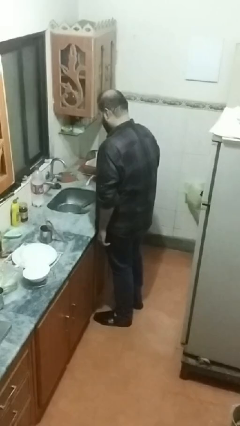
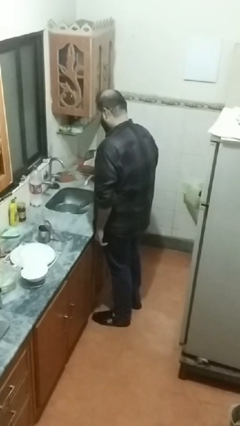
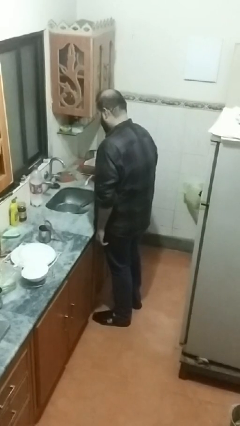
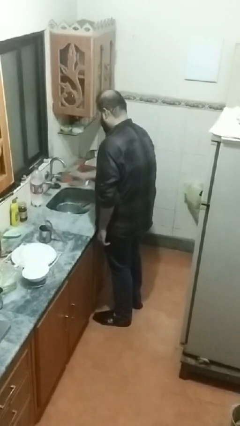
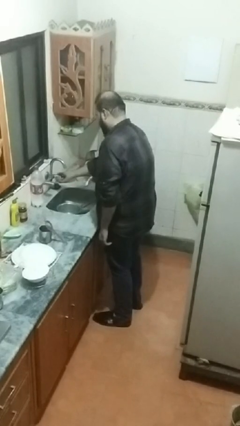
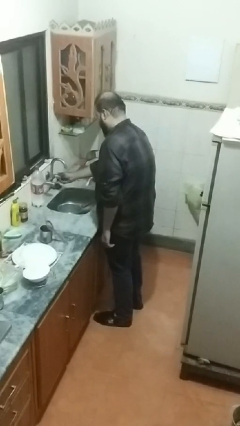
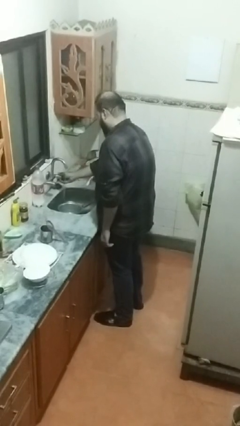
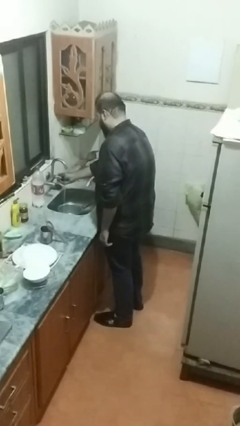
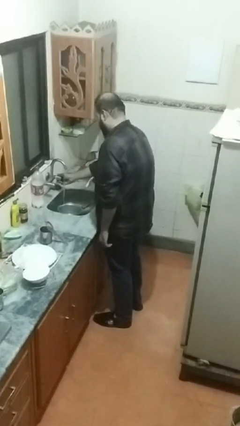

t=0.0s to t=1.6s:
person turns on faucet

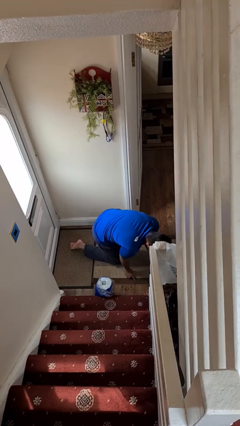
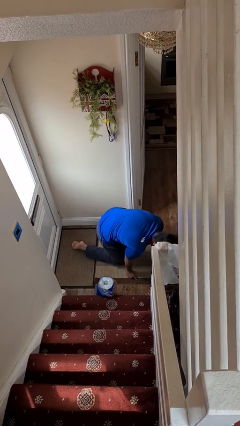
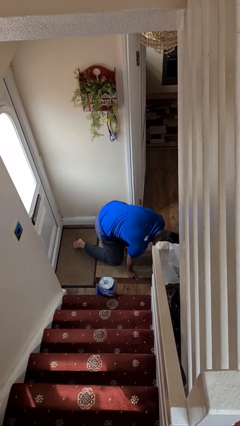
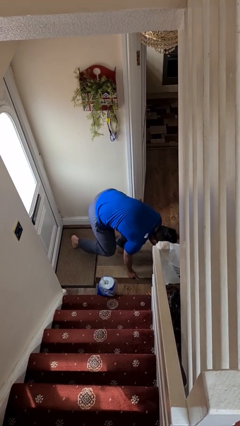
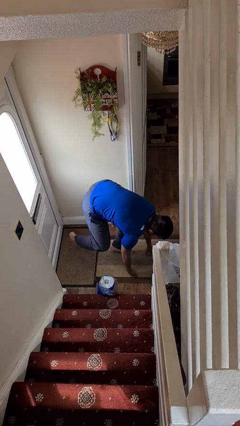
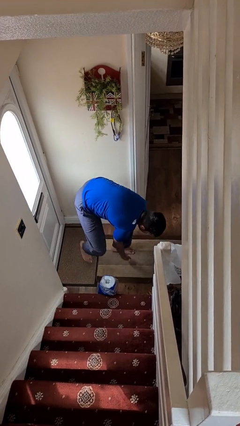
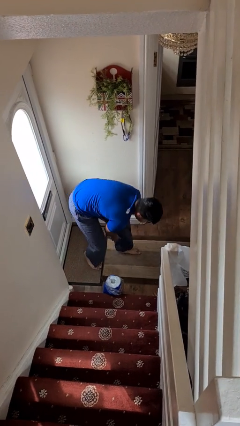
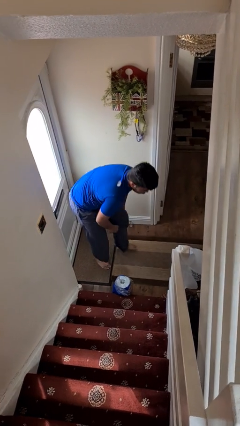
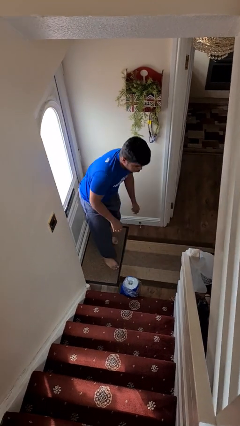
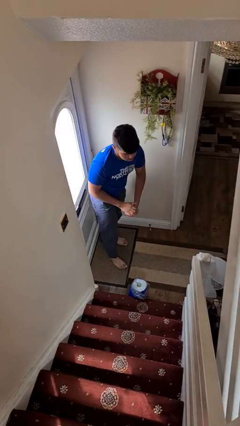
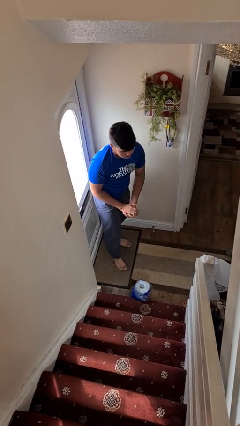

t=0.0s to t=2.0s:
person stands up from floor

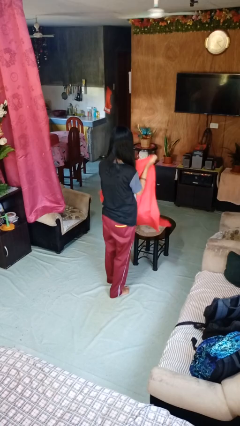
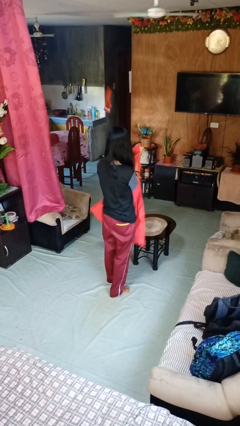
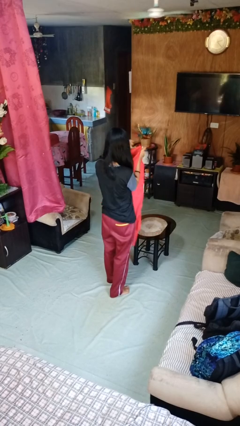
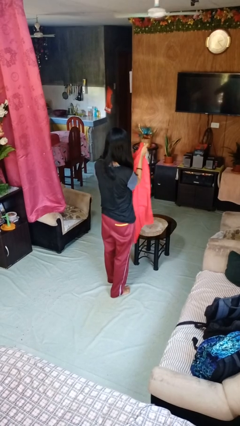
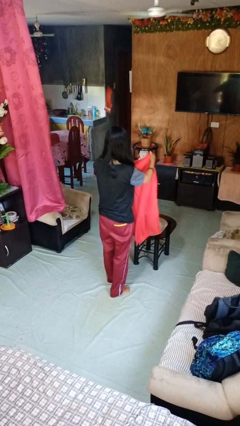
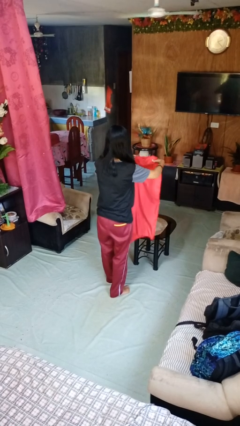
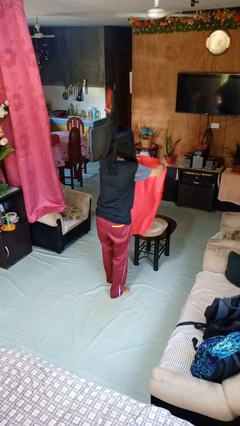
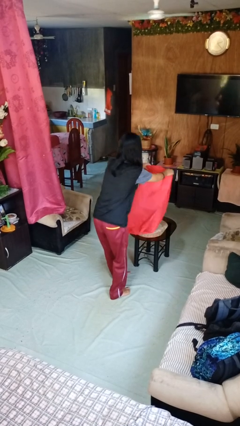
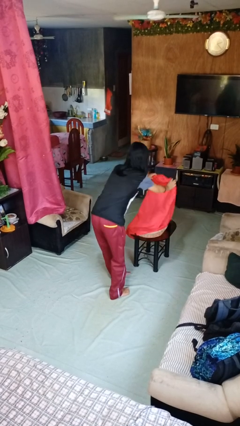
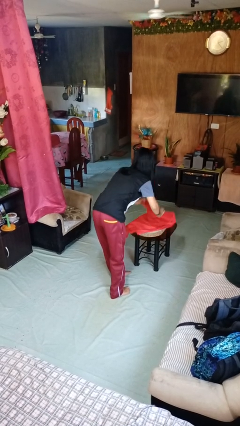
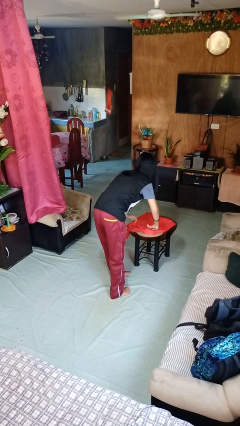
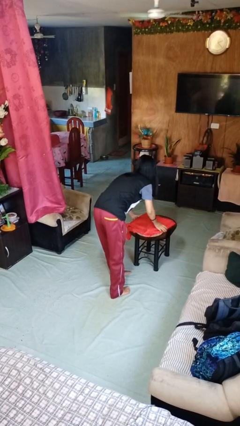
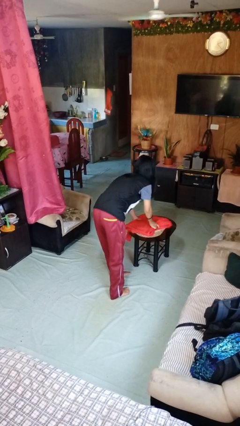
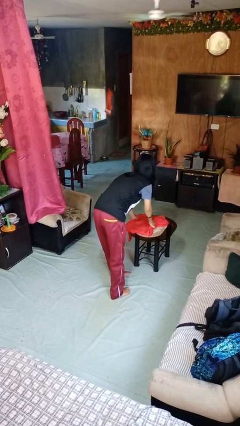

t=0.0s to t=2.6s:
person folds tablecloth

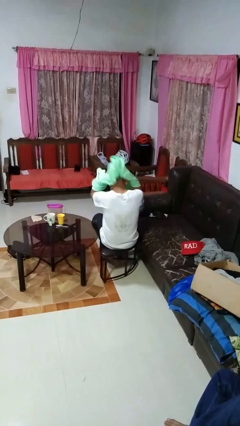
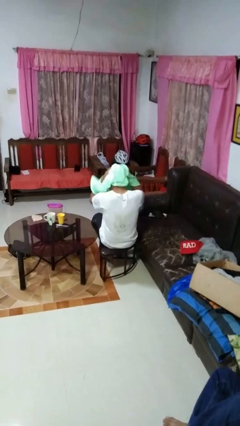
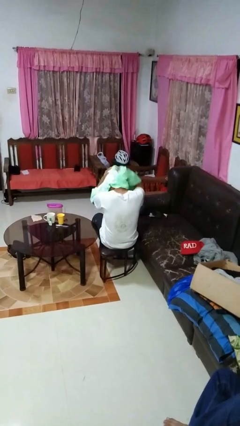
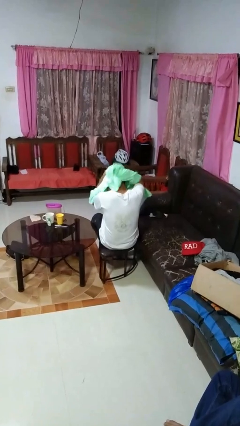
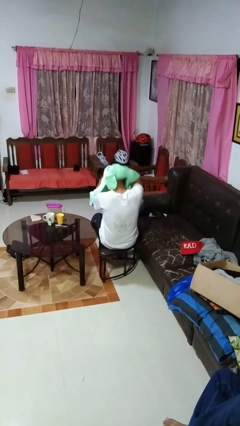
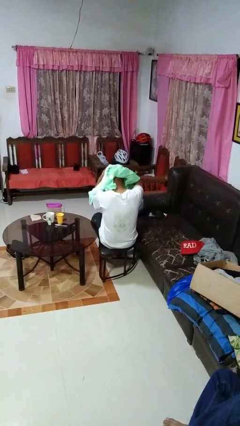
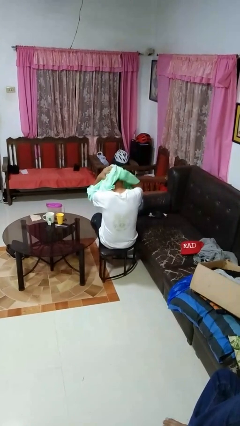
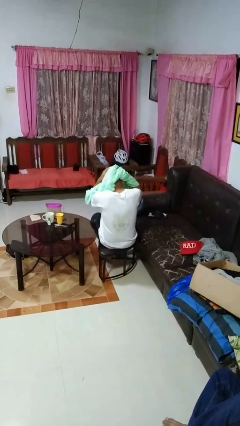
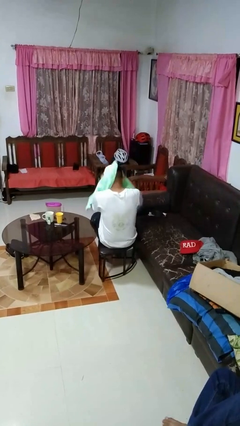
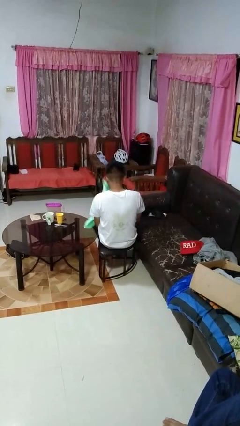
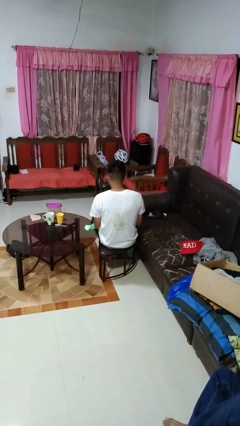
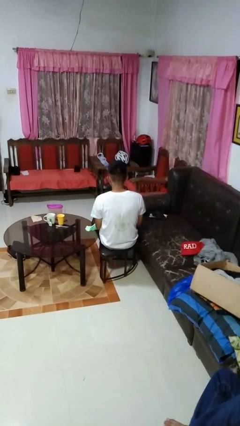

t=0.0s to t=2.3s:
person dries hair with towel

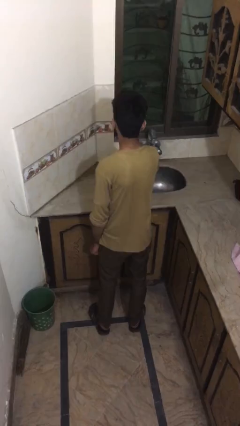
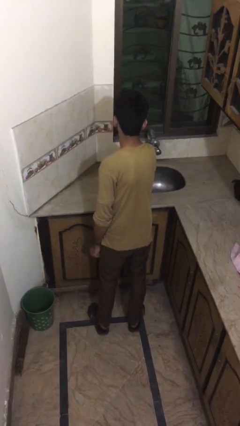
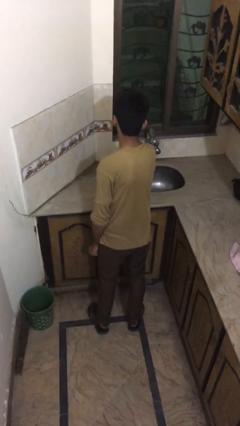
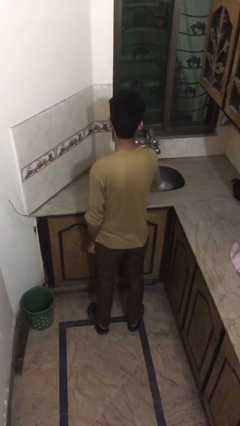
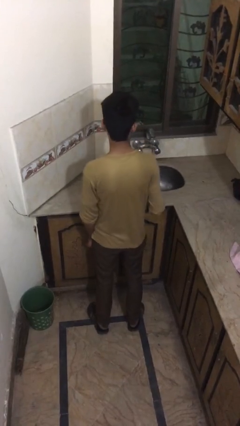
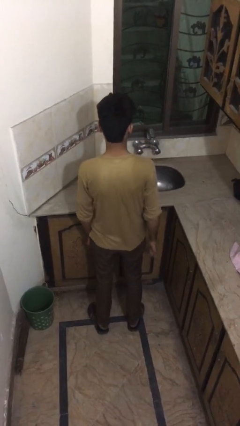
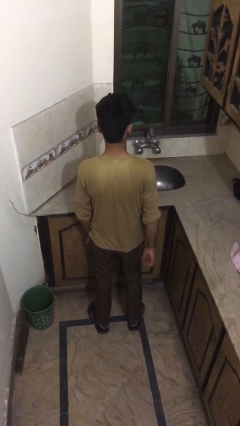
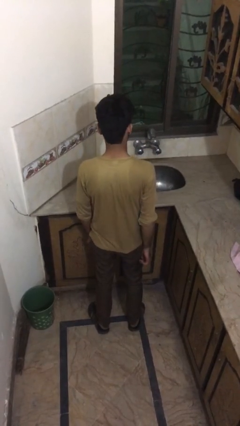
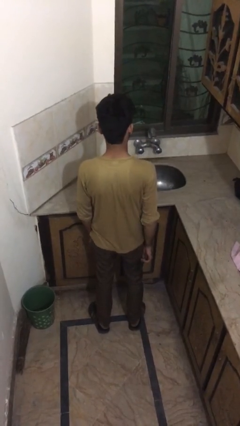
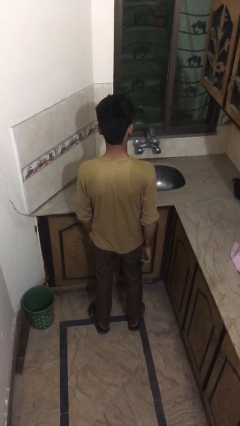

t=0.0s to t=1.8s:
person turns off faucet

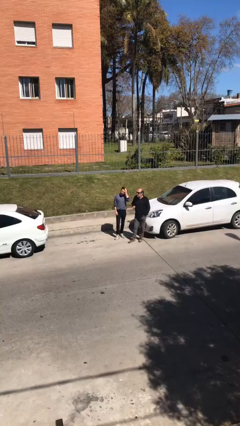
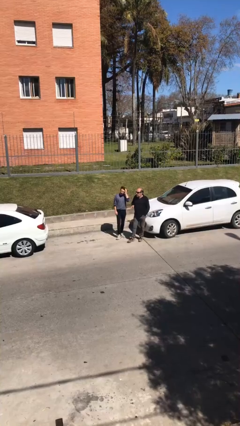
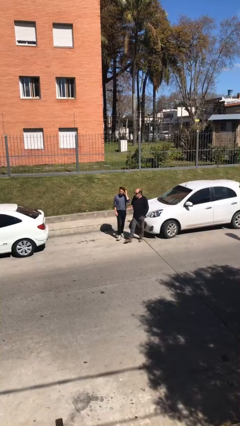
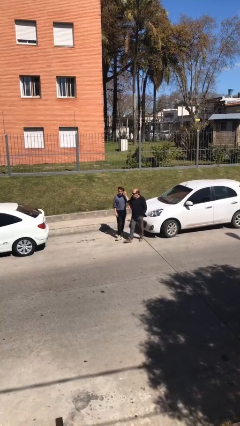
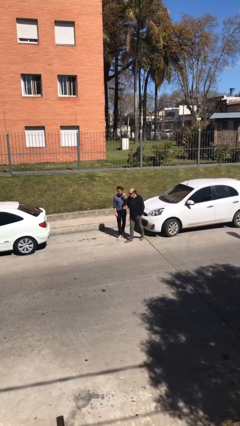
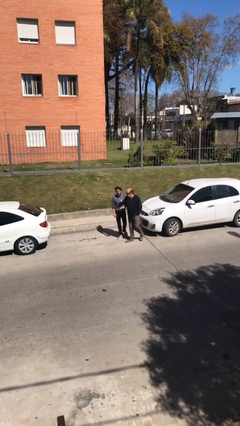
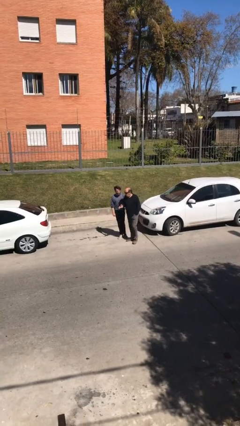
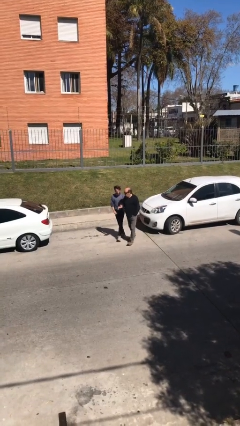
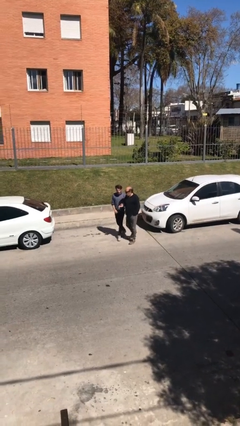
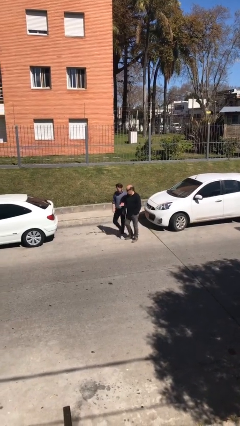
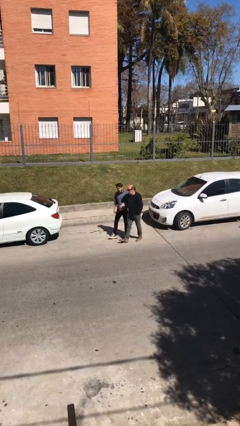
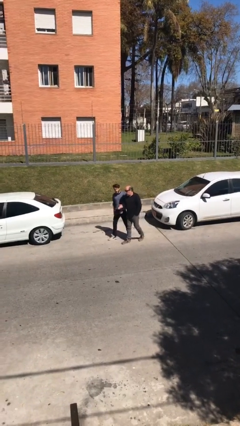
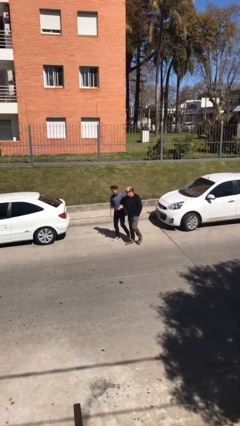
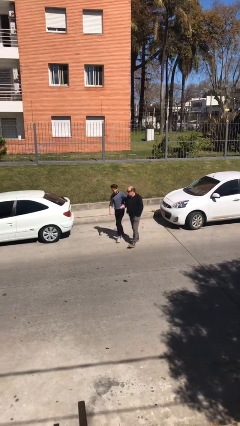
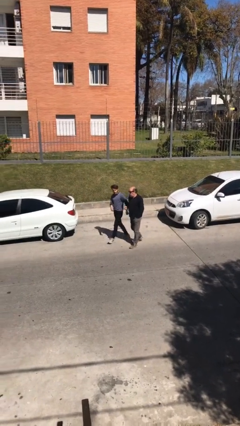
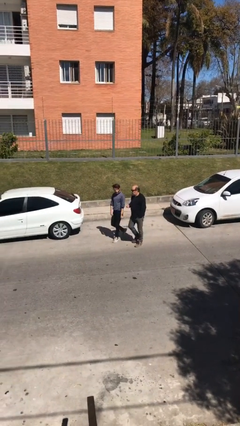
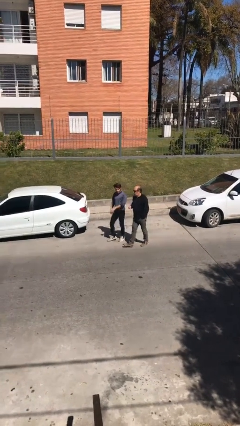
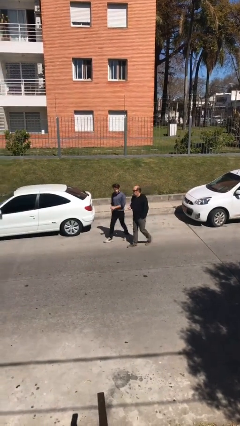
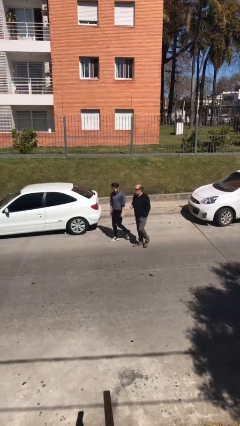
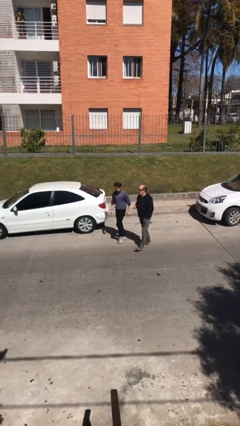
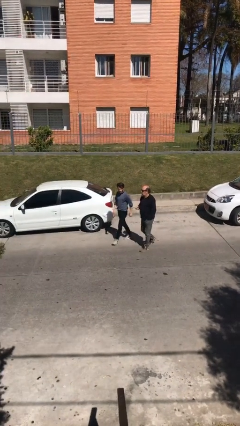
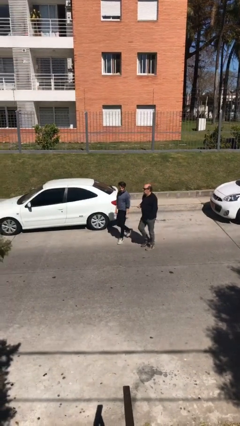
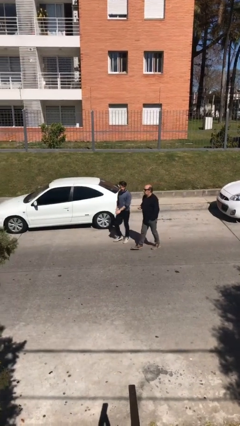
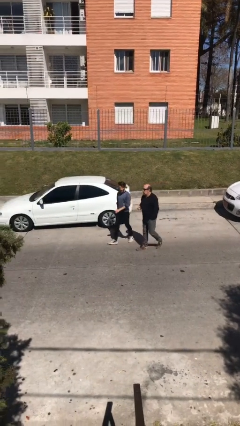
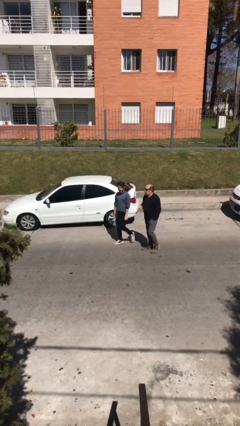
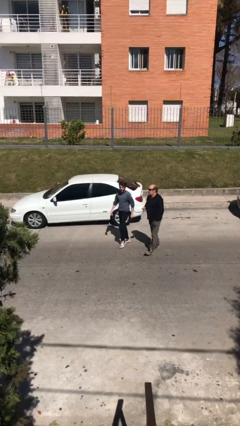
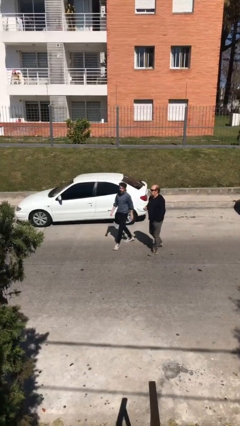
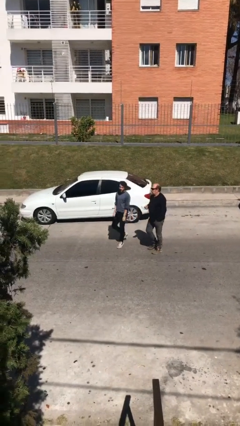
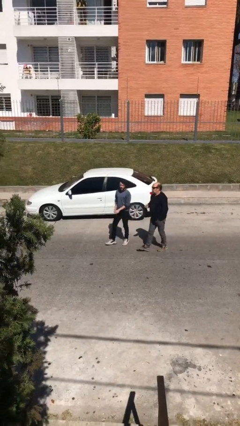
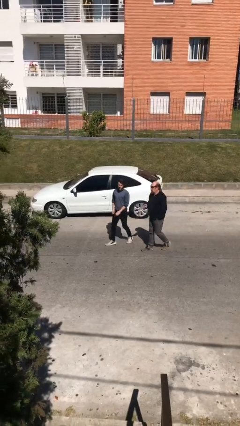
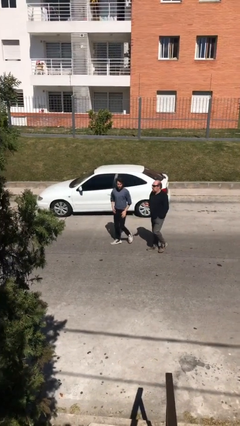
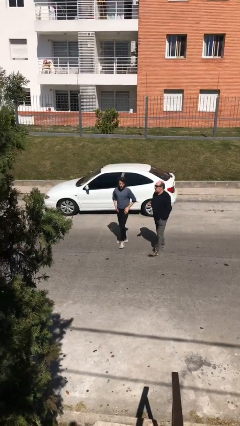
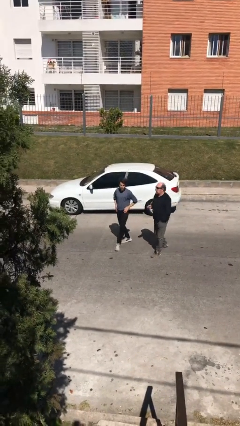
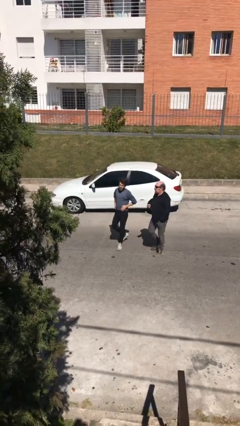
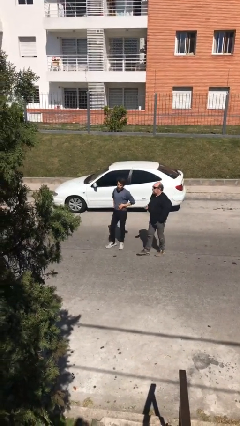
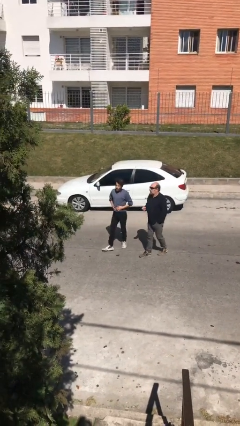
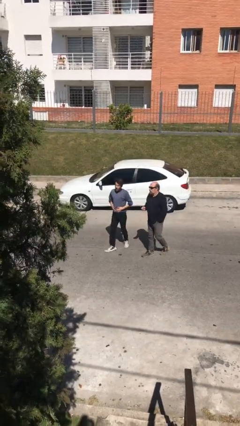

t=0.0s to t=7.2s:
person talks to person
